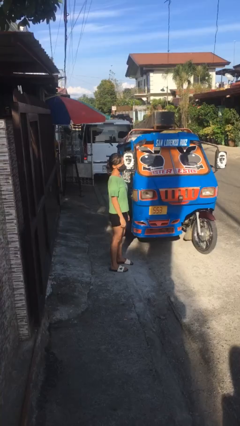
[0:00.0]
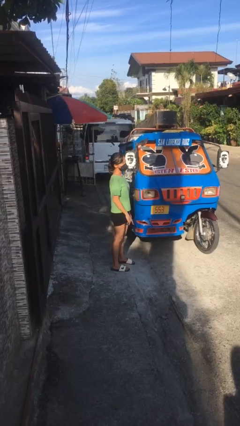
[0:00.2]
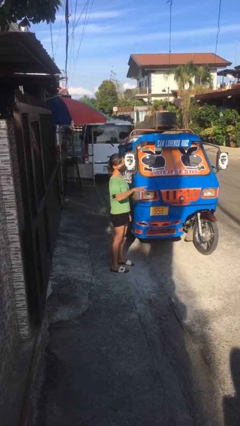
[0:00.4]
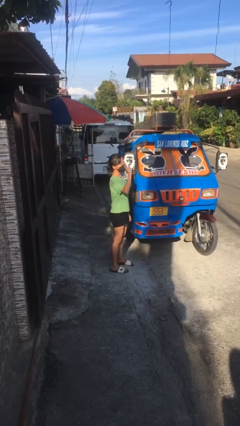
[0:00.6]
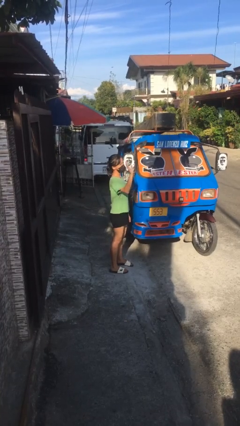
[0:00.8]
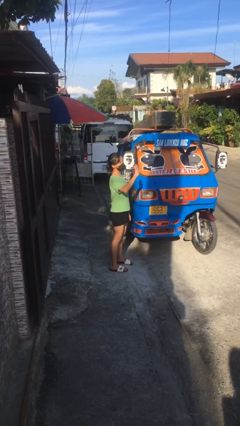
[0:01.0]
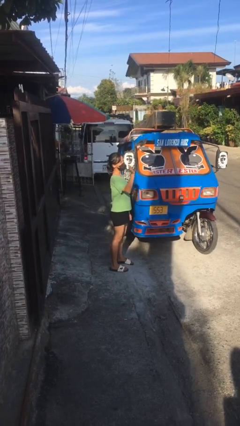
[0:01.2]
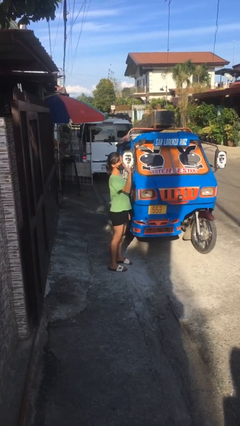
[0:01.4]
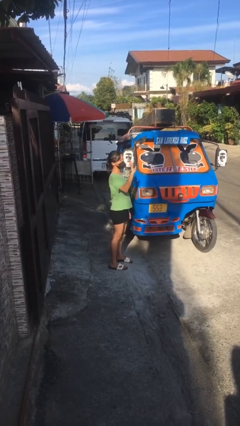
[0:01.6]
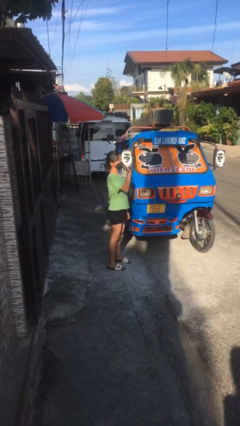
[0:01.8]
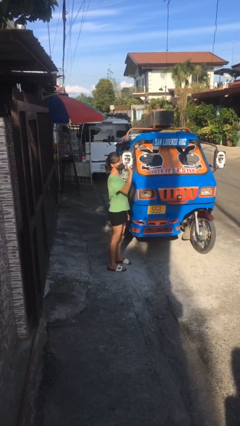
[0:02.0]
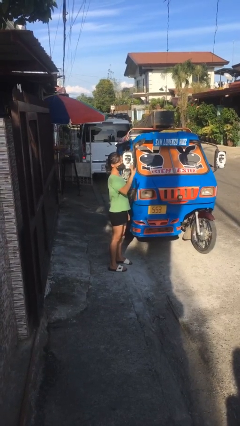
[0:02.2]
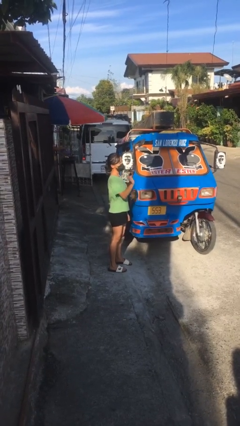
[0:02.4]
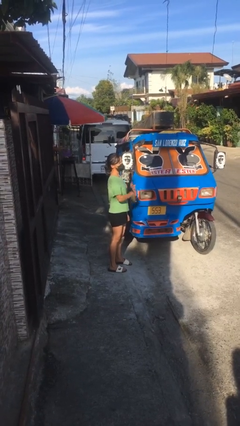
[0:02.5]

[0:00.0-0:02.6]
person waves at person

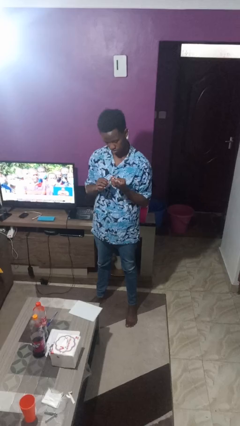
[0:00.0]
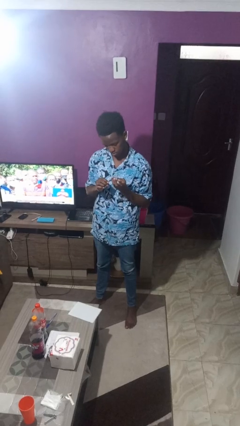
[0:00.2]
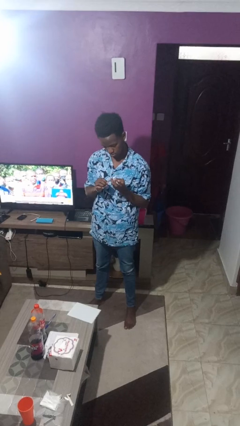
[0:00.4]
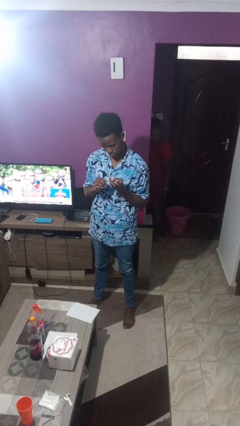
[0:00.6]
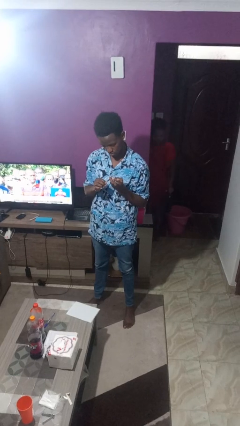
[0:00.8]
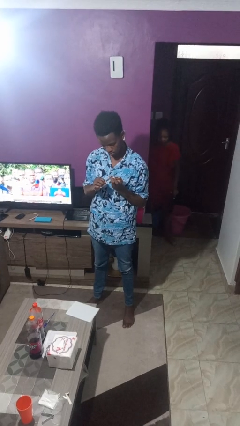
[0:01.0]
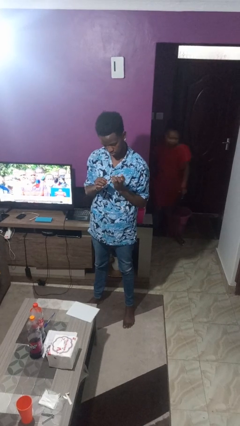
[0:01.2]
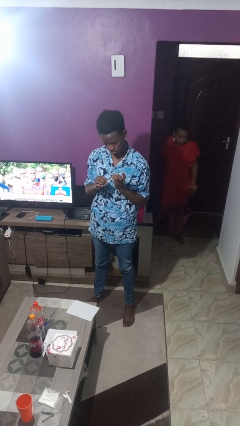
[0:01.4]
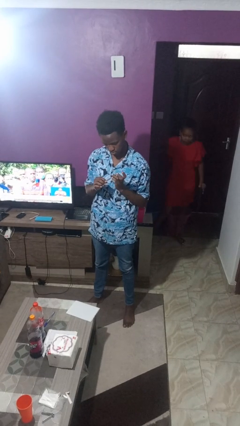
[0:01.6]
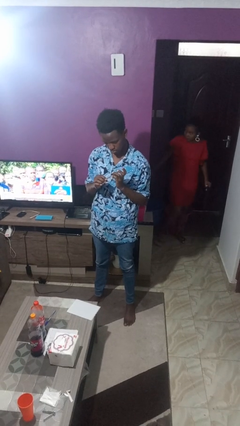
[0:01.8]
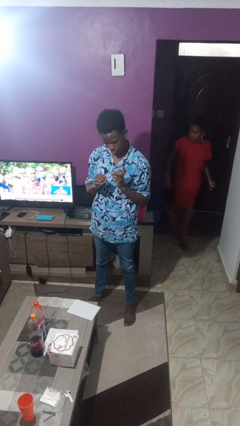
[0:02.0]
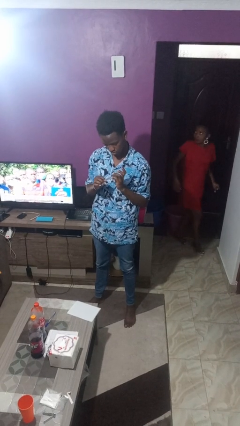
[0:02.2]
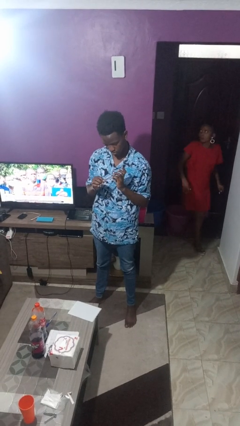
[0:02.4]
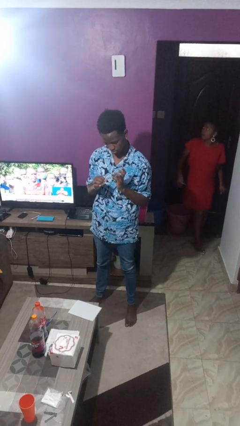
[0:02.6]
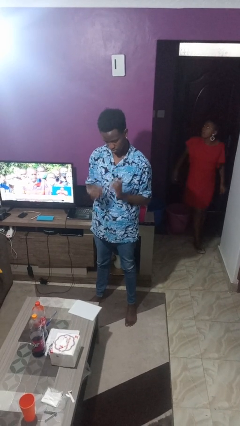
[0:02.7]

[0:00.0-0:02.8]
person files fingernails

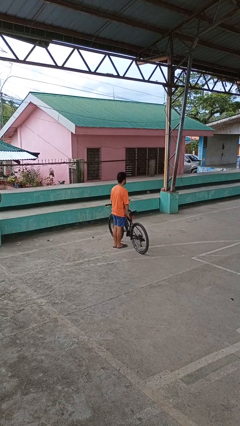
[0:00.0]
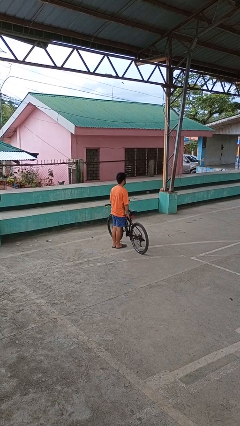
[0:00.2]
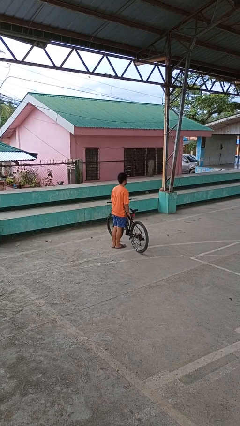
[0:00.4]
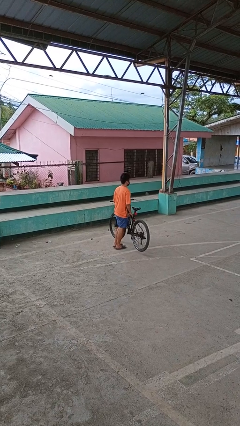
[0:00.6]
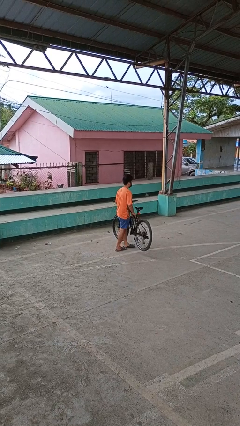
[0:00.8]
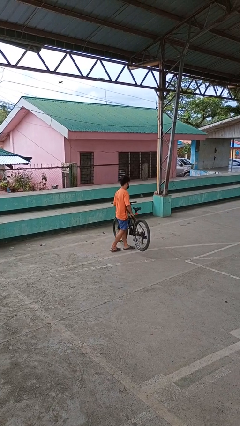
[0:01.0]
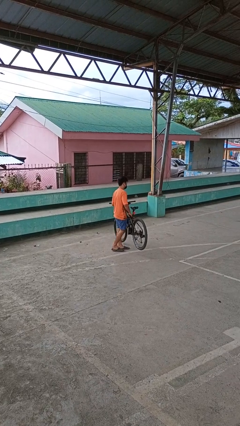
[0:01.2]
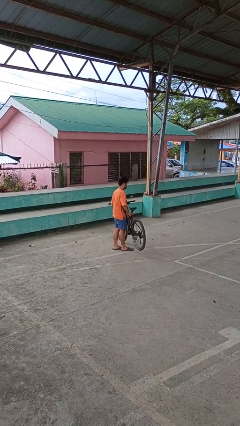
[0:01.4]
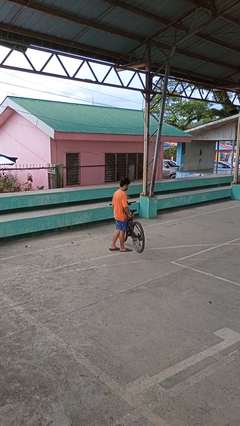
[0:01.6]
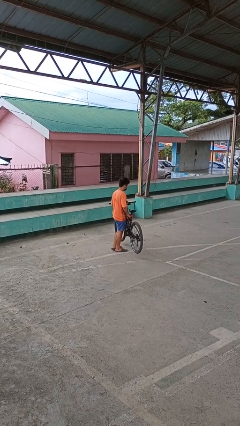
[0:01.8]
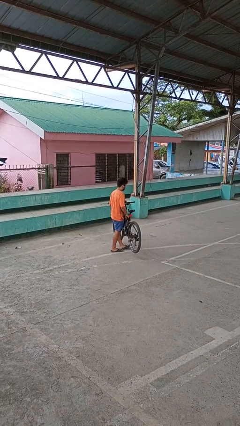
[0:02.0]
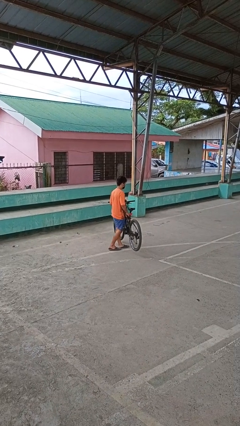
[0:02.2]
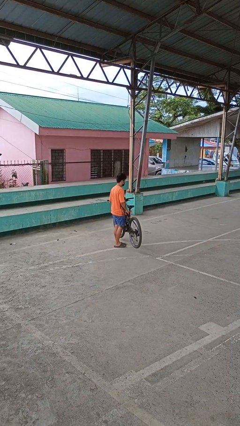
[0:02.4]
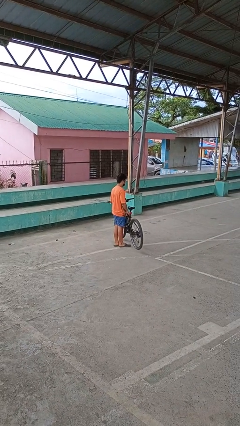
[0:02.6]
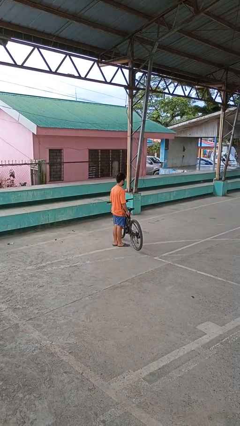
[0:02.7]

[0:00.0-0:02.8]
person carries bicycle

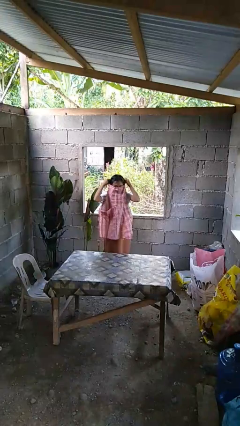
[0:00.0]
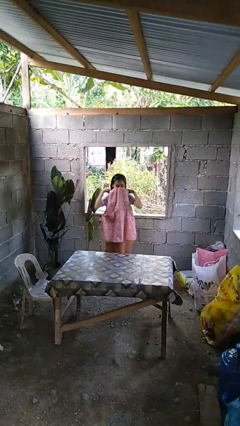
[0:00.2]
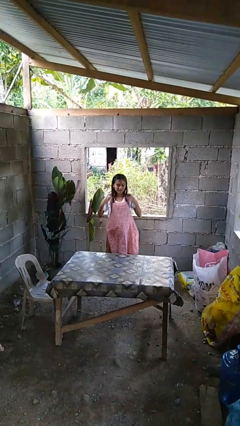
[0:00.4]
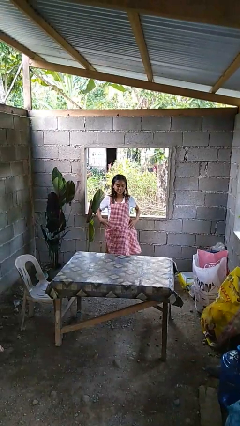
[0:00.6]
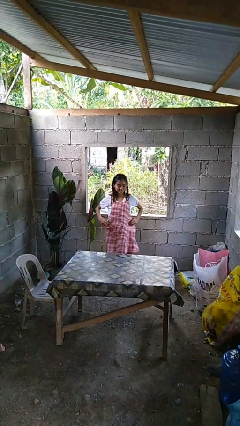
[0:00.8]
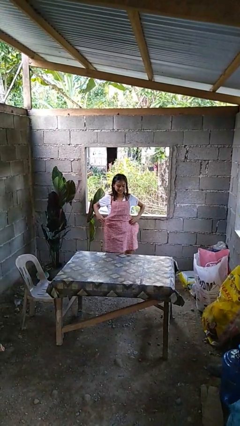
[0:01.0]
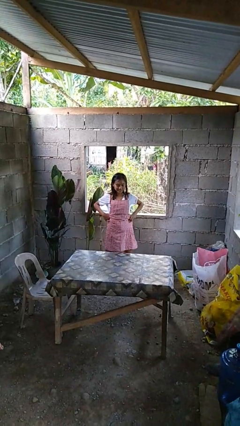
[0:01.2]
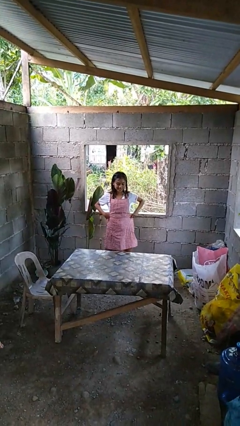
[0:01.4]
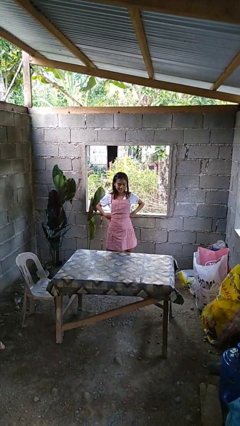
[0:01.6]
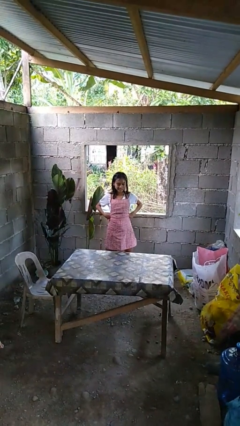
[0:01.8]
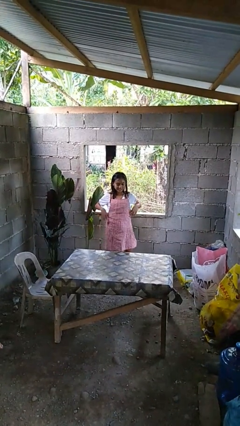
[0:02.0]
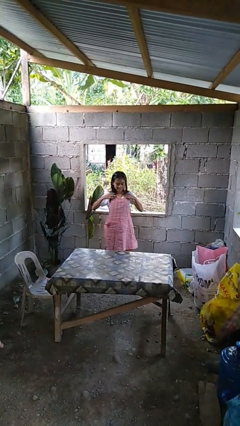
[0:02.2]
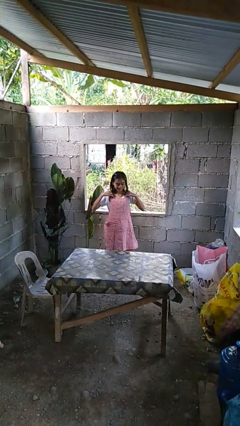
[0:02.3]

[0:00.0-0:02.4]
person puts on apron

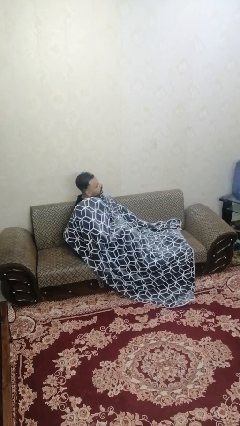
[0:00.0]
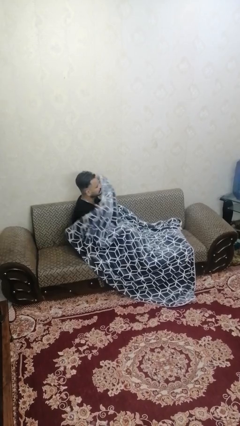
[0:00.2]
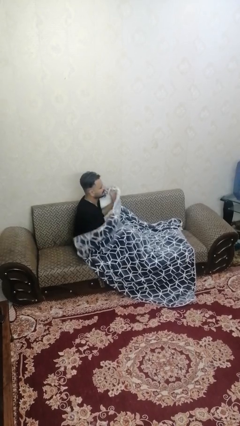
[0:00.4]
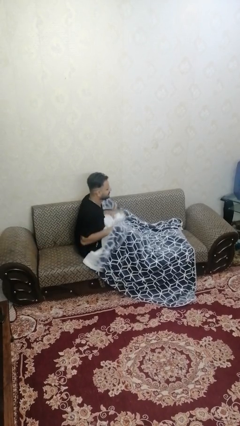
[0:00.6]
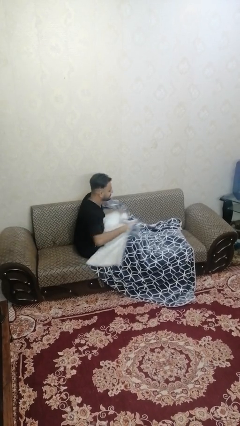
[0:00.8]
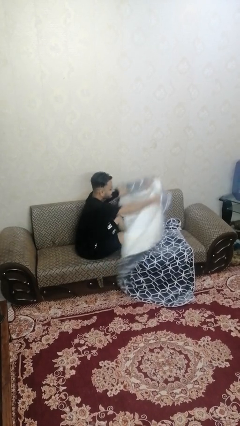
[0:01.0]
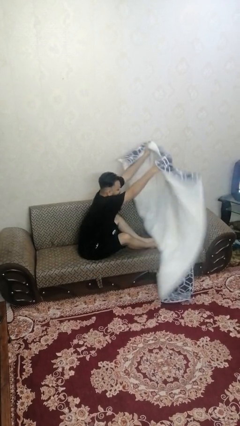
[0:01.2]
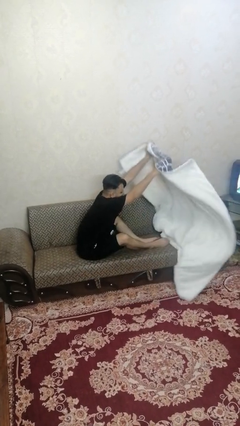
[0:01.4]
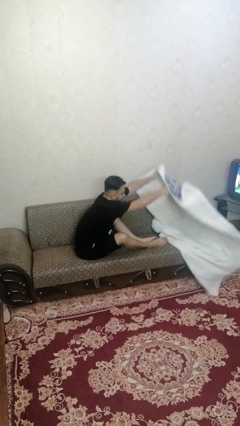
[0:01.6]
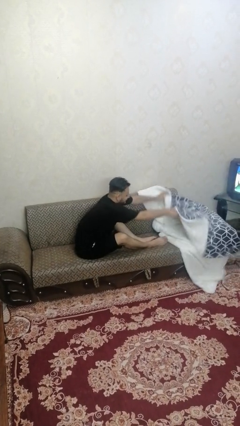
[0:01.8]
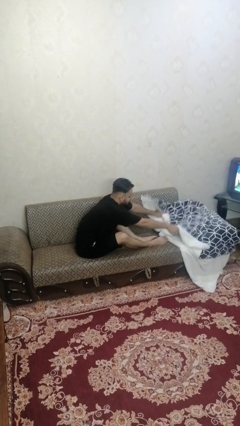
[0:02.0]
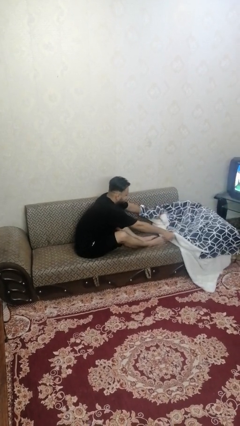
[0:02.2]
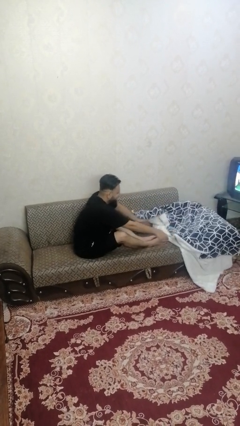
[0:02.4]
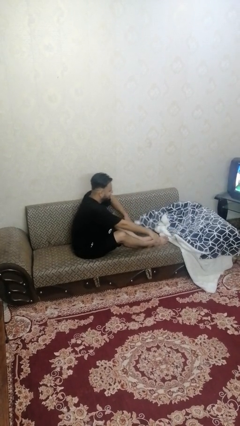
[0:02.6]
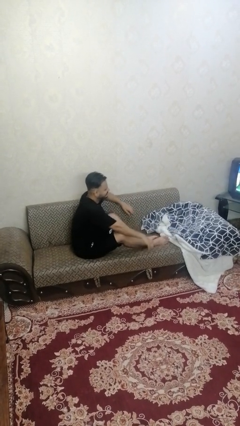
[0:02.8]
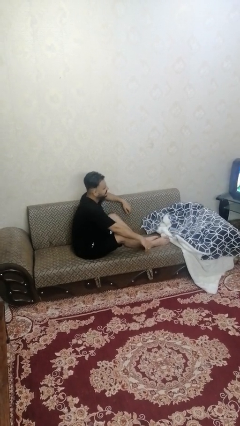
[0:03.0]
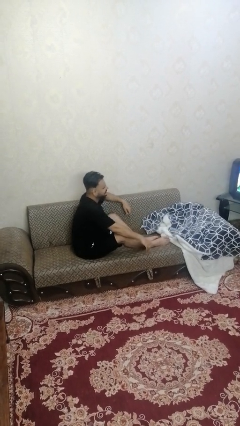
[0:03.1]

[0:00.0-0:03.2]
person uncovers with blanket

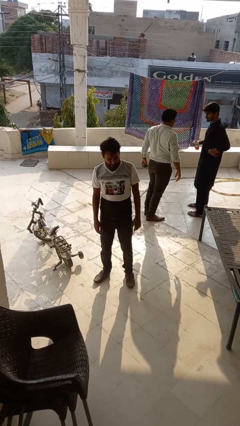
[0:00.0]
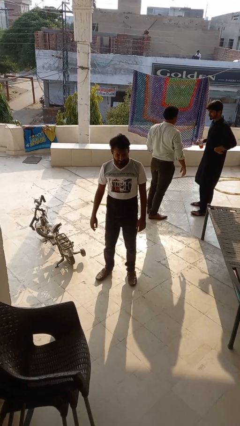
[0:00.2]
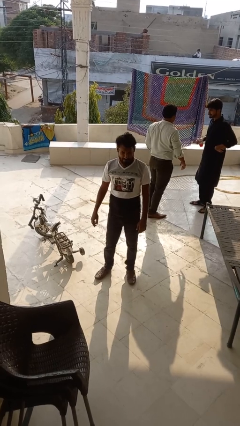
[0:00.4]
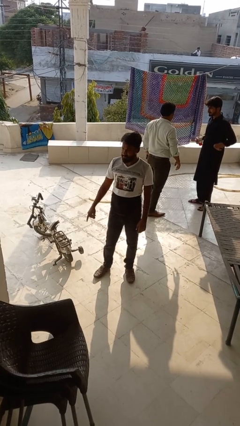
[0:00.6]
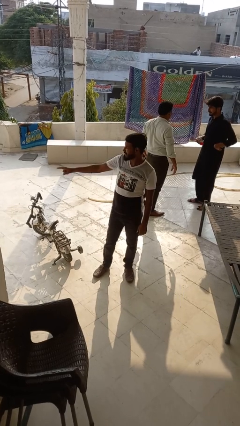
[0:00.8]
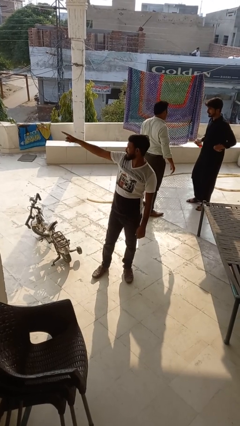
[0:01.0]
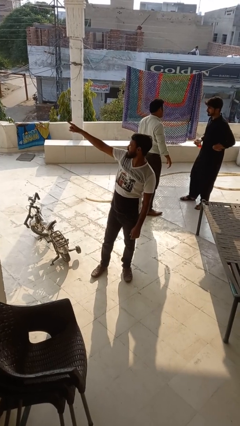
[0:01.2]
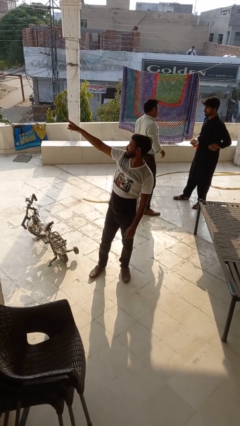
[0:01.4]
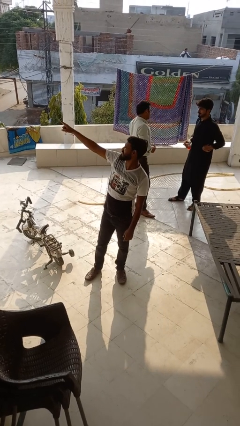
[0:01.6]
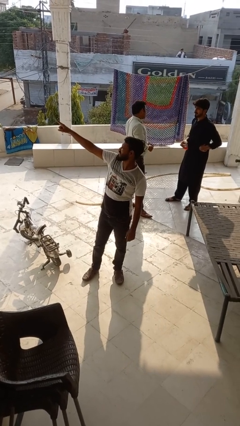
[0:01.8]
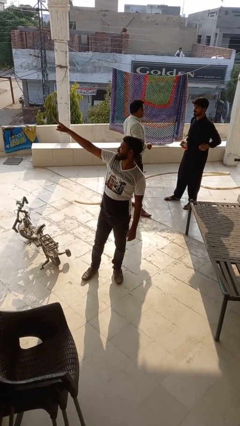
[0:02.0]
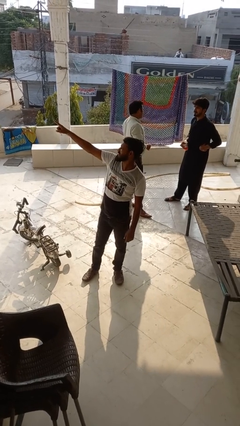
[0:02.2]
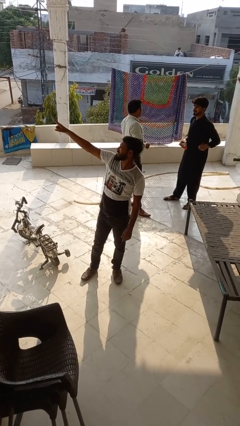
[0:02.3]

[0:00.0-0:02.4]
person points at person

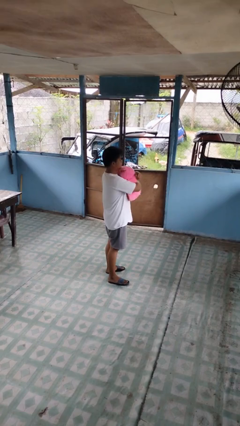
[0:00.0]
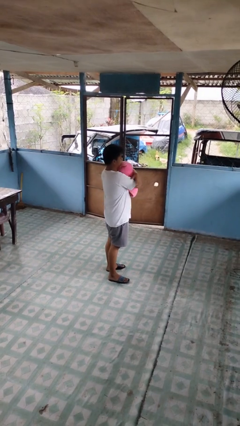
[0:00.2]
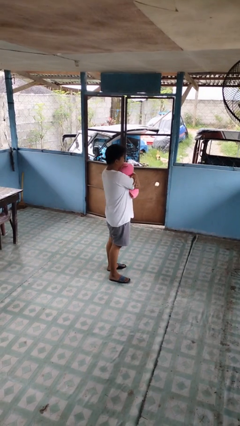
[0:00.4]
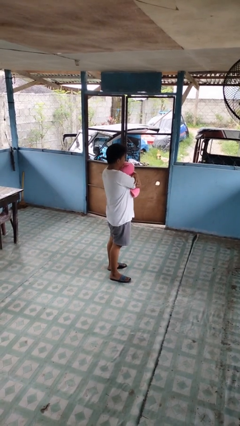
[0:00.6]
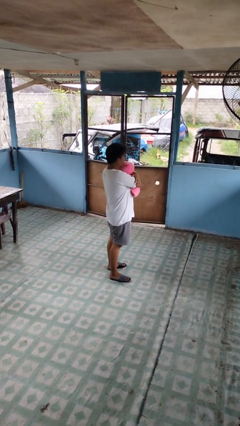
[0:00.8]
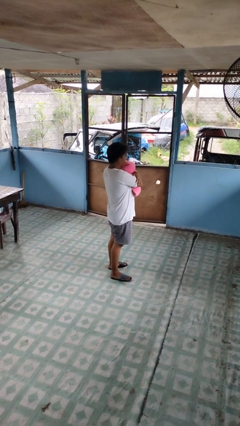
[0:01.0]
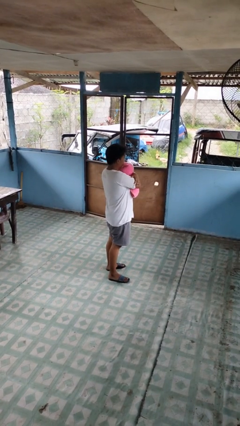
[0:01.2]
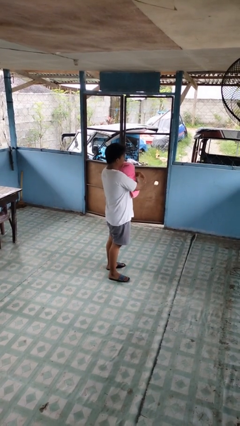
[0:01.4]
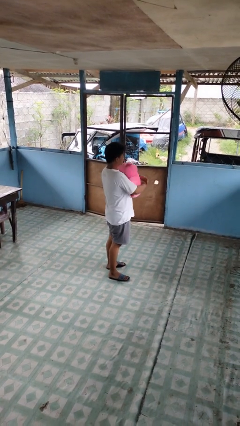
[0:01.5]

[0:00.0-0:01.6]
person hugs stuffed animal
